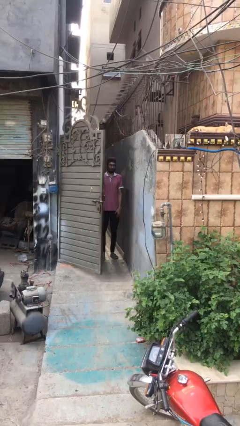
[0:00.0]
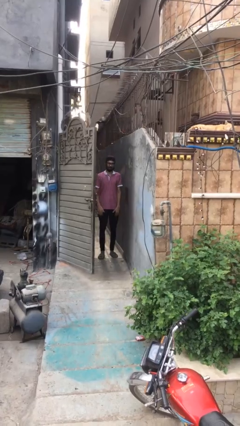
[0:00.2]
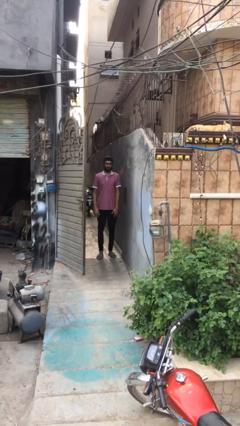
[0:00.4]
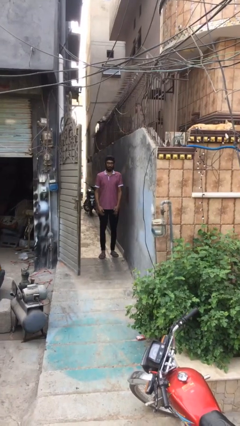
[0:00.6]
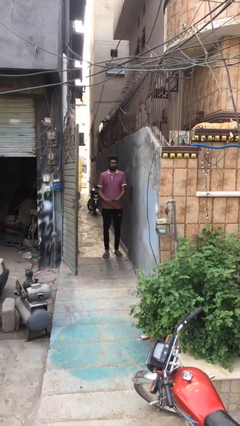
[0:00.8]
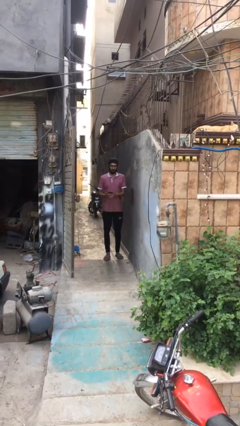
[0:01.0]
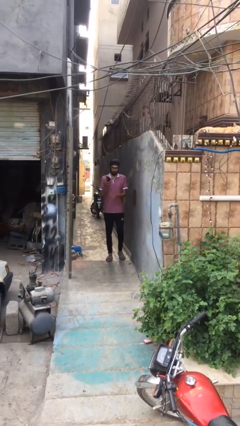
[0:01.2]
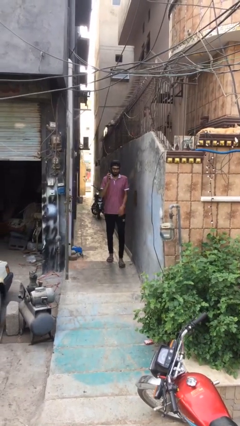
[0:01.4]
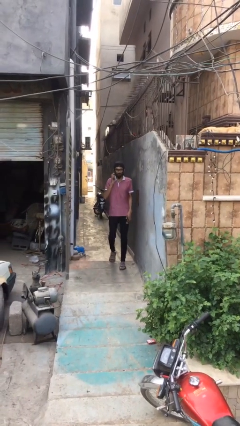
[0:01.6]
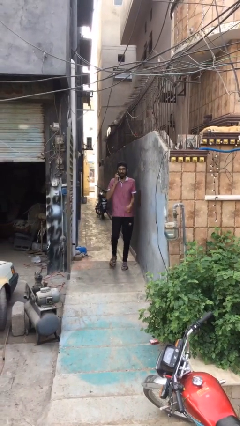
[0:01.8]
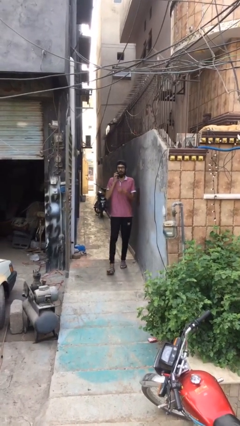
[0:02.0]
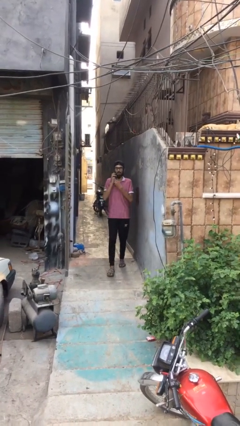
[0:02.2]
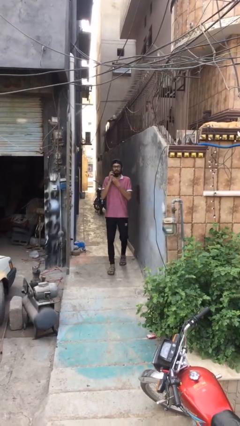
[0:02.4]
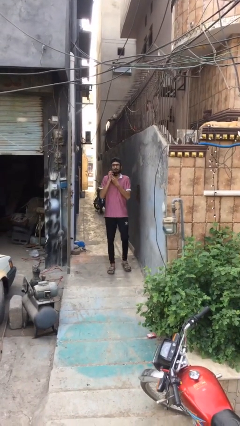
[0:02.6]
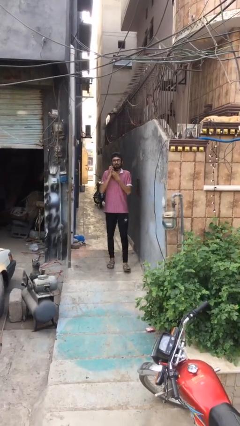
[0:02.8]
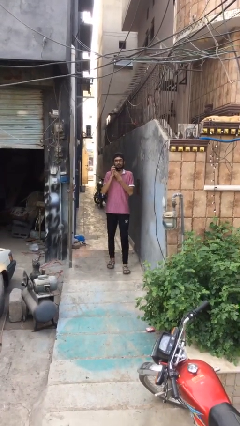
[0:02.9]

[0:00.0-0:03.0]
person enters scene through structure

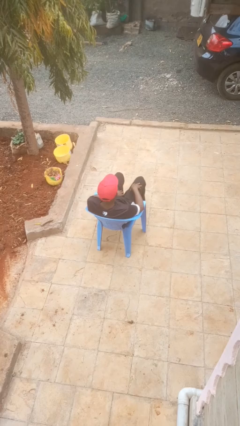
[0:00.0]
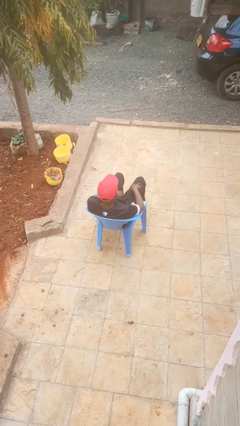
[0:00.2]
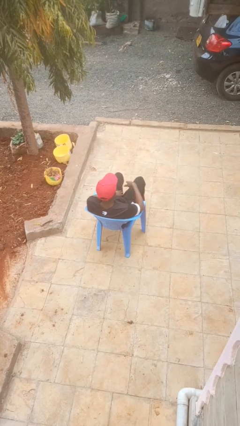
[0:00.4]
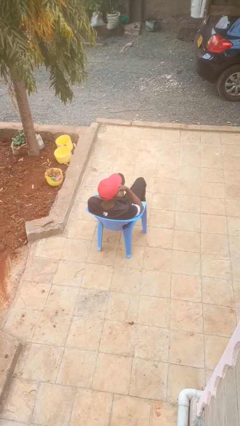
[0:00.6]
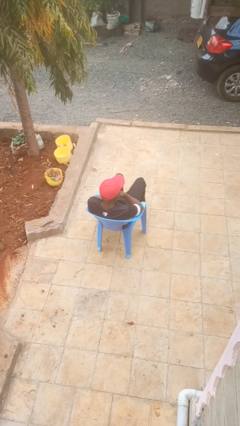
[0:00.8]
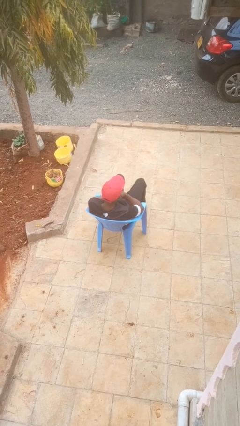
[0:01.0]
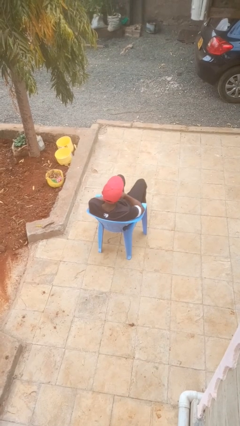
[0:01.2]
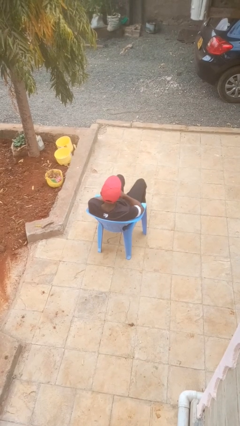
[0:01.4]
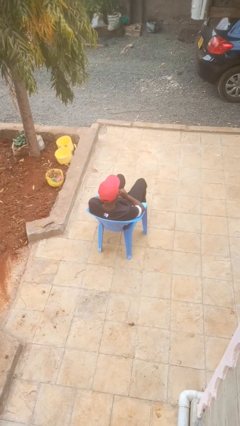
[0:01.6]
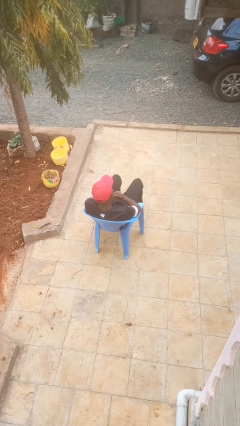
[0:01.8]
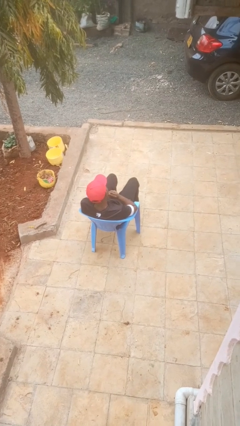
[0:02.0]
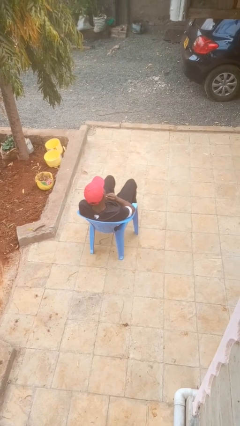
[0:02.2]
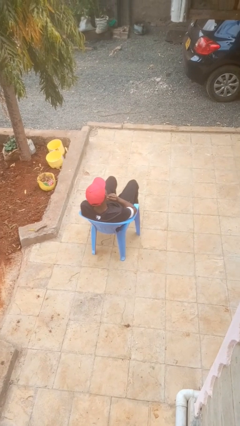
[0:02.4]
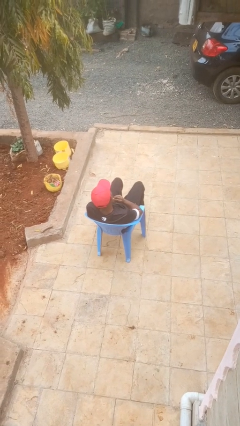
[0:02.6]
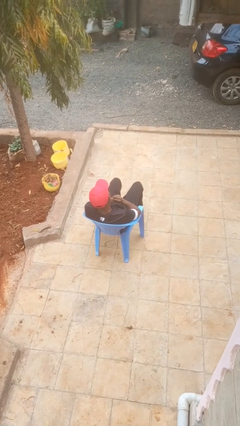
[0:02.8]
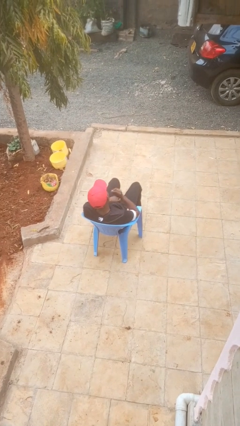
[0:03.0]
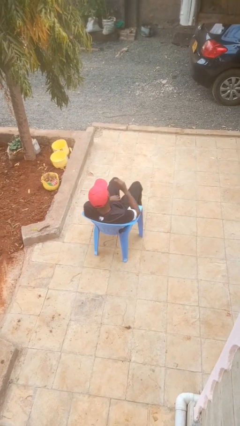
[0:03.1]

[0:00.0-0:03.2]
person strokes chin

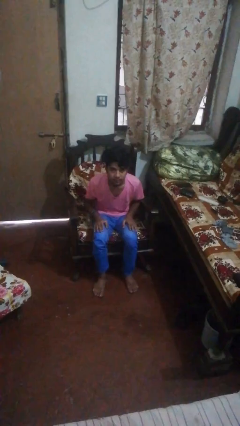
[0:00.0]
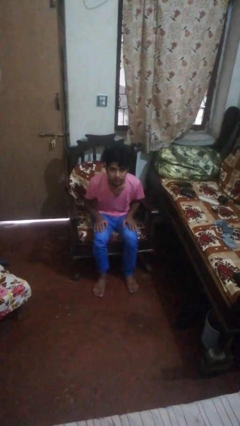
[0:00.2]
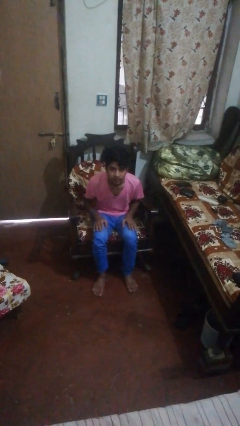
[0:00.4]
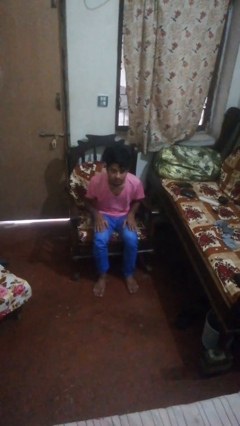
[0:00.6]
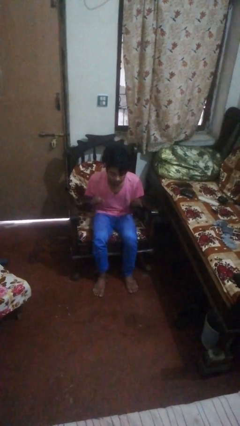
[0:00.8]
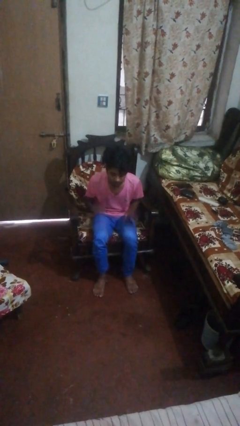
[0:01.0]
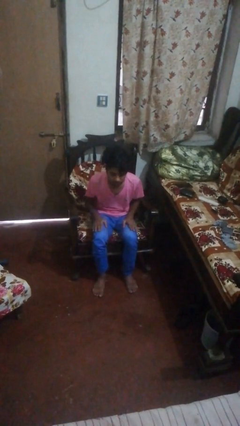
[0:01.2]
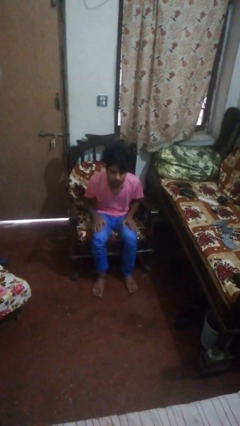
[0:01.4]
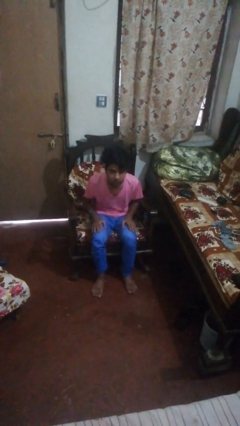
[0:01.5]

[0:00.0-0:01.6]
person slaps hands on thighs

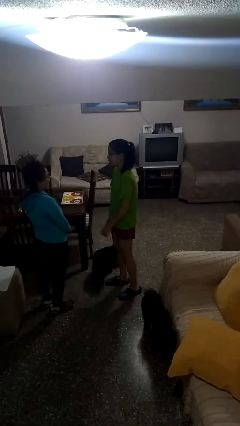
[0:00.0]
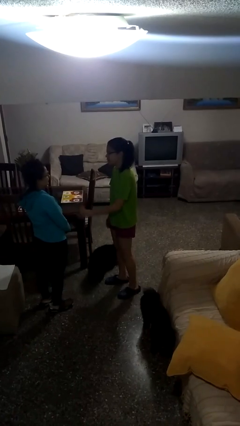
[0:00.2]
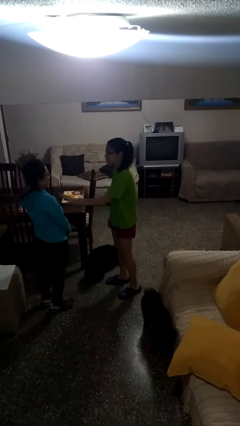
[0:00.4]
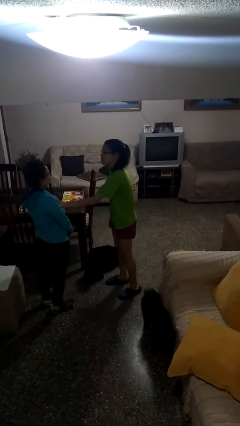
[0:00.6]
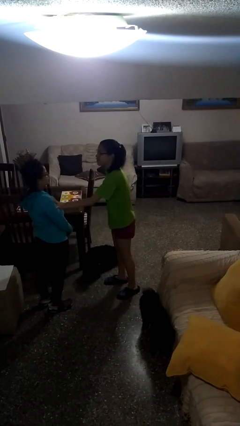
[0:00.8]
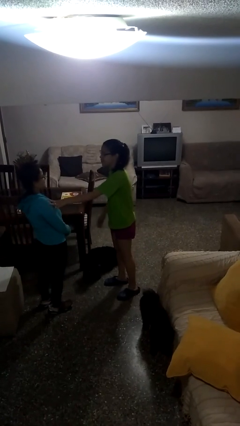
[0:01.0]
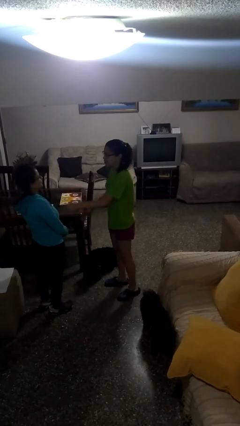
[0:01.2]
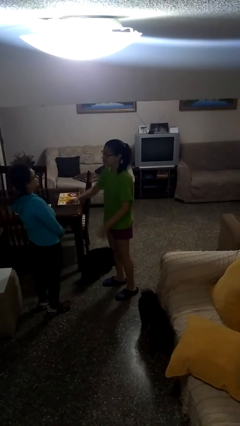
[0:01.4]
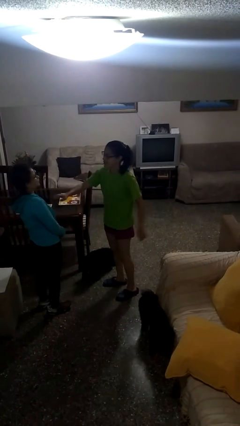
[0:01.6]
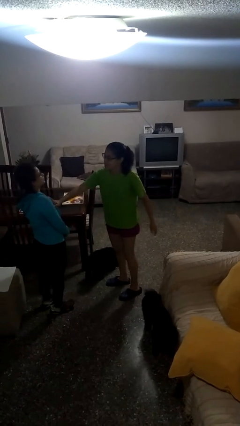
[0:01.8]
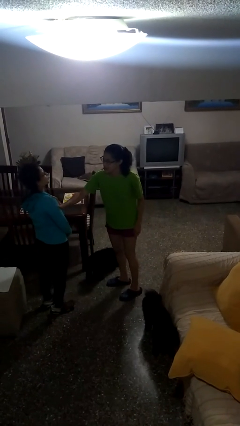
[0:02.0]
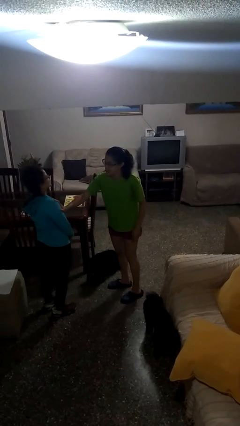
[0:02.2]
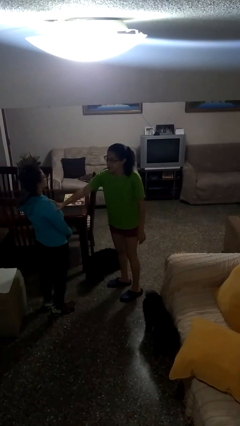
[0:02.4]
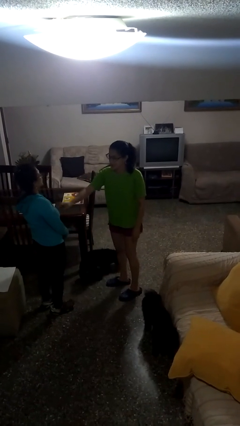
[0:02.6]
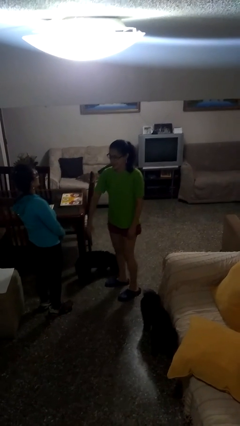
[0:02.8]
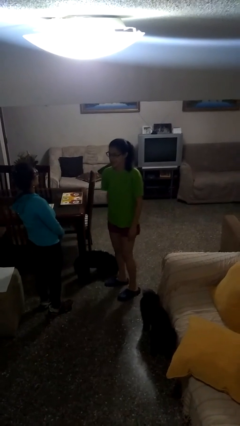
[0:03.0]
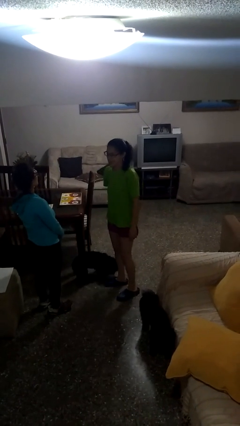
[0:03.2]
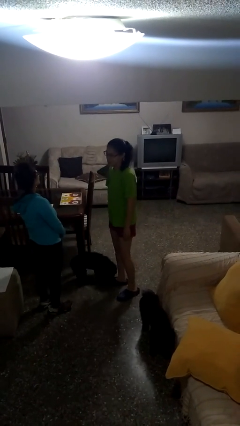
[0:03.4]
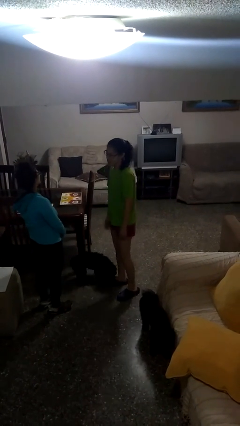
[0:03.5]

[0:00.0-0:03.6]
person shoves person

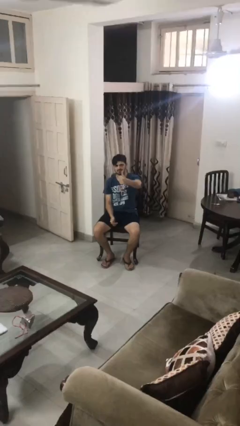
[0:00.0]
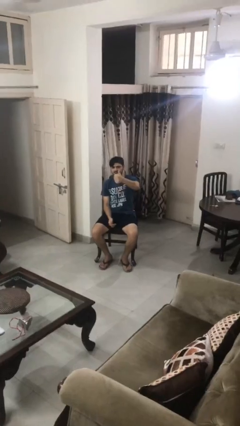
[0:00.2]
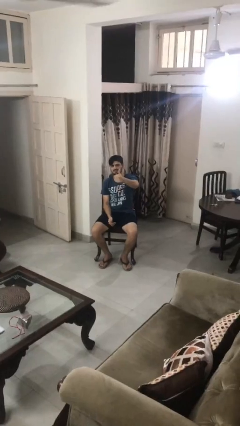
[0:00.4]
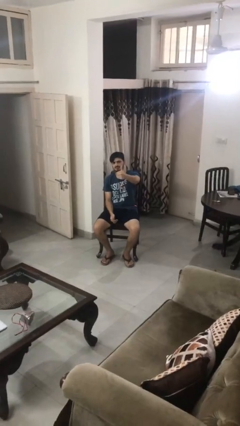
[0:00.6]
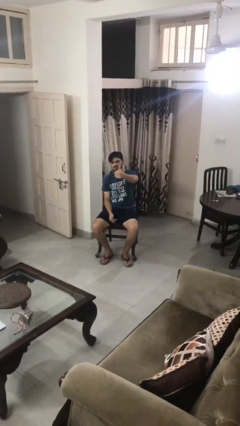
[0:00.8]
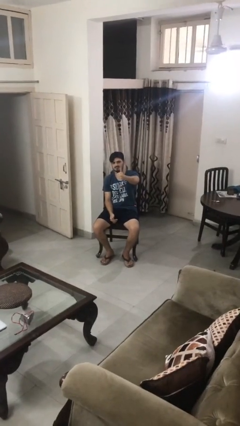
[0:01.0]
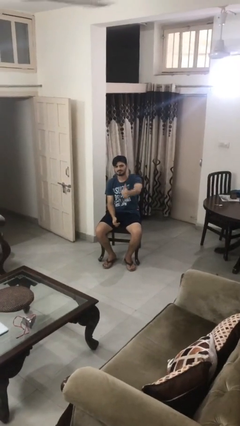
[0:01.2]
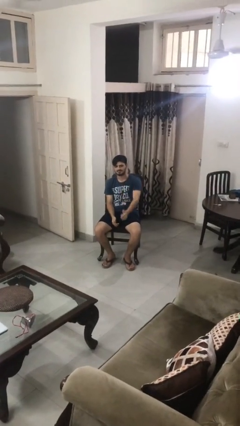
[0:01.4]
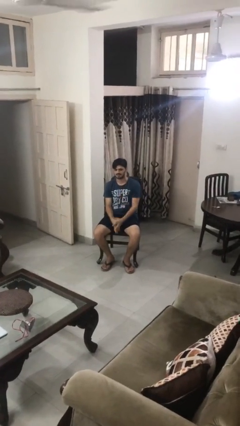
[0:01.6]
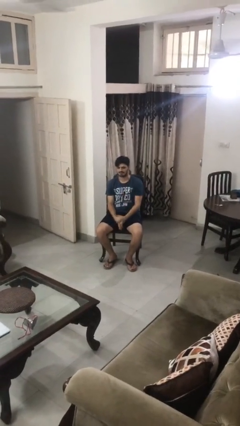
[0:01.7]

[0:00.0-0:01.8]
person gestures thumbs up

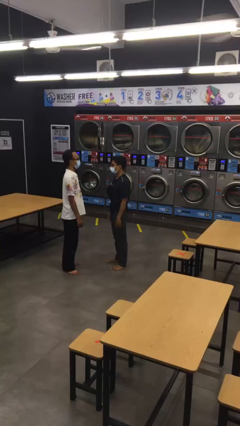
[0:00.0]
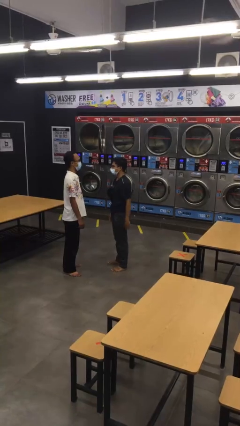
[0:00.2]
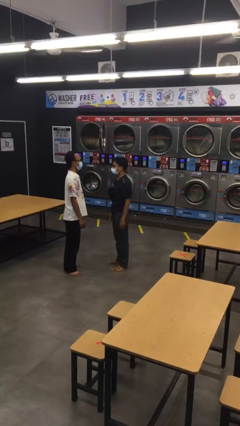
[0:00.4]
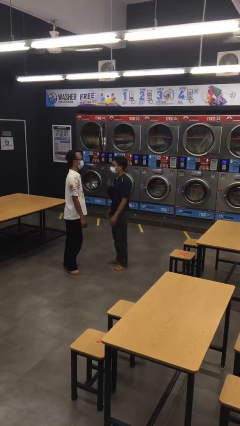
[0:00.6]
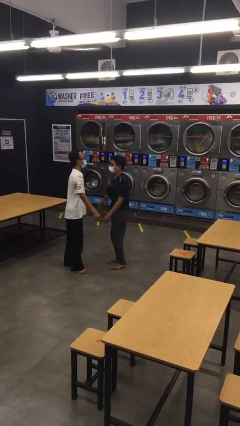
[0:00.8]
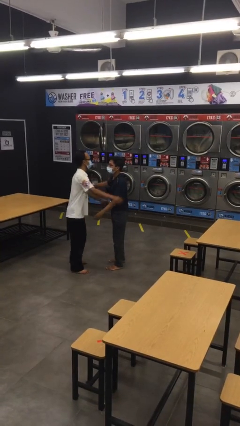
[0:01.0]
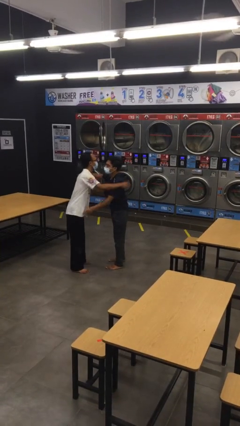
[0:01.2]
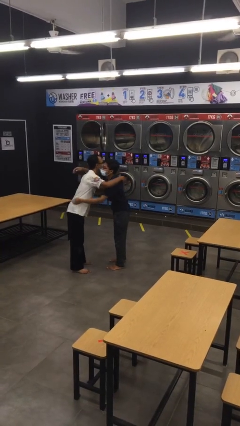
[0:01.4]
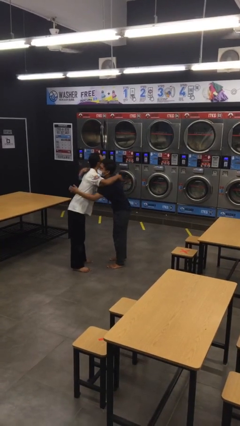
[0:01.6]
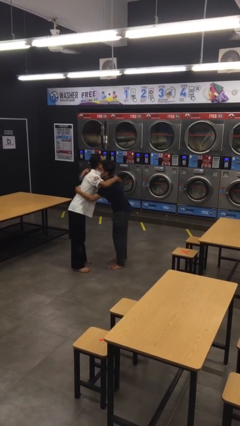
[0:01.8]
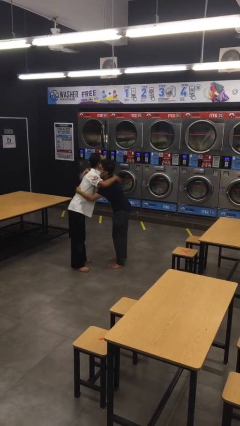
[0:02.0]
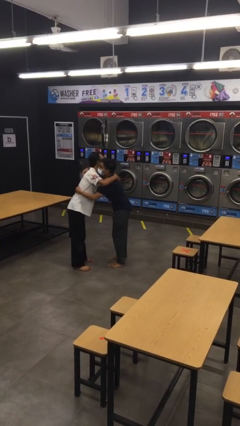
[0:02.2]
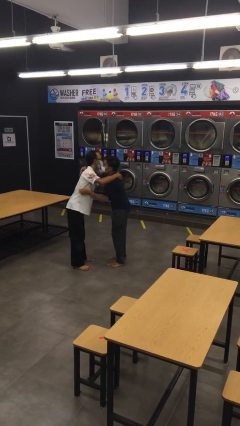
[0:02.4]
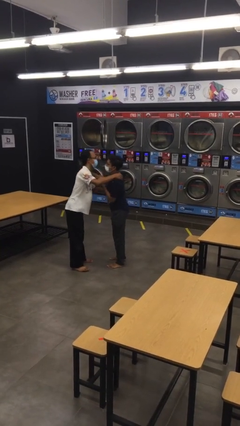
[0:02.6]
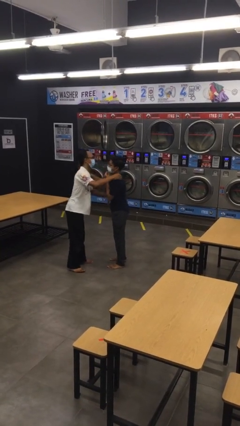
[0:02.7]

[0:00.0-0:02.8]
person embraces person

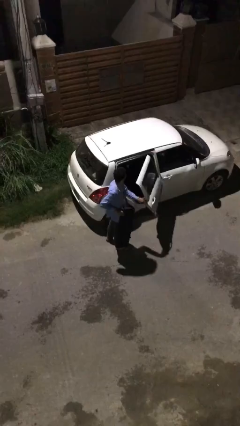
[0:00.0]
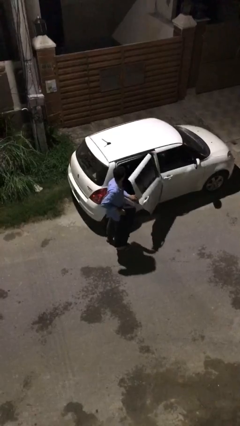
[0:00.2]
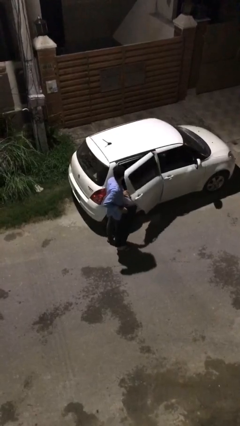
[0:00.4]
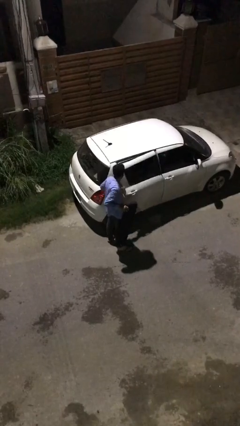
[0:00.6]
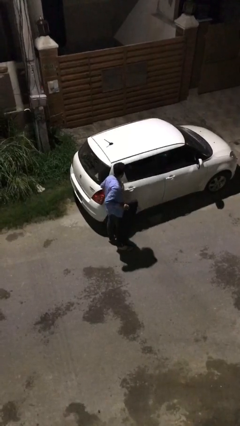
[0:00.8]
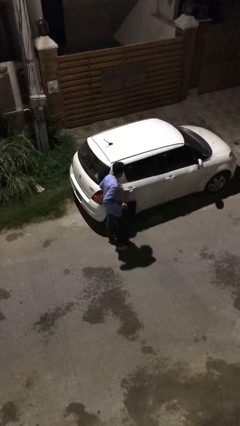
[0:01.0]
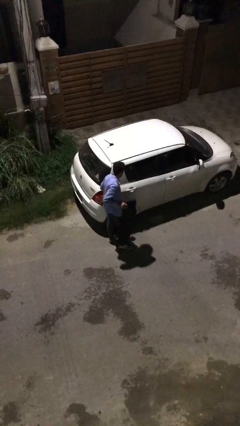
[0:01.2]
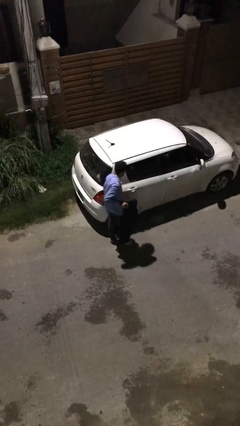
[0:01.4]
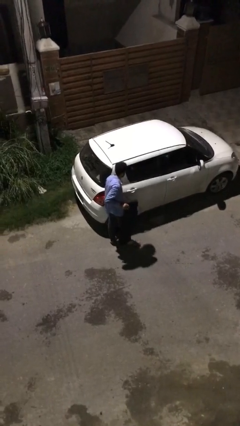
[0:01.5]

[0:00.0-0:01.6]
person closes car door
